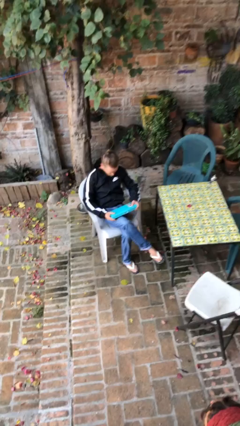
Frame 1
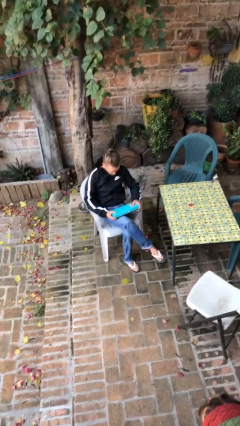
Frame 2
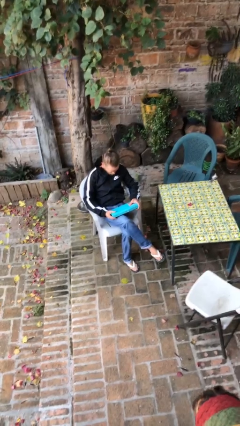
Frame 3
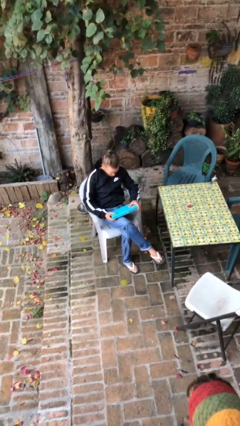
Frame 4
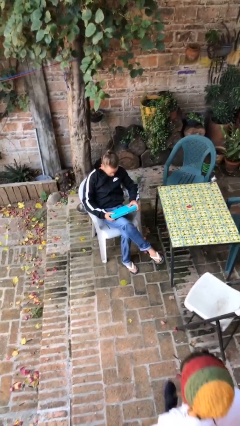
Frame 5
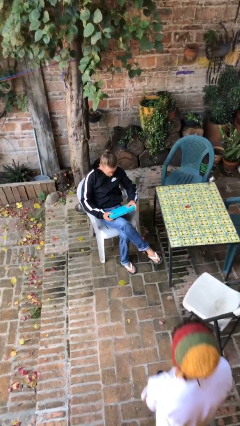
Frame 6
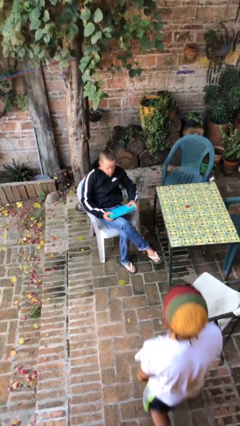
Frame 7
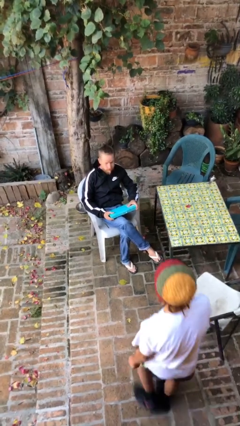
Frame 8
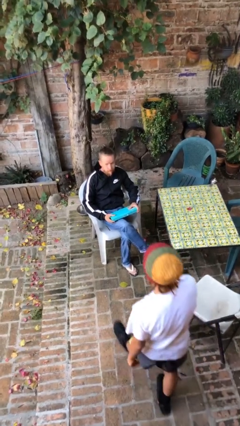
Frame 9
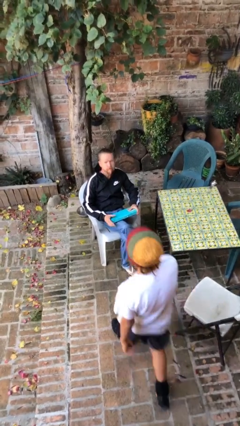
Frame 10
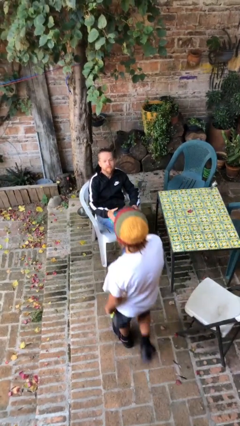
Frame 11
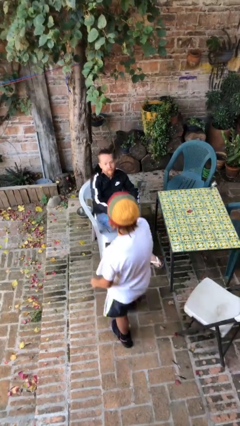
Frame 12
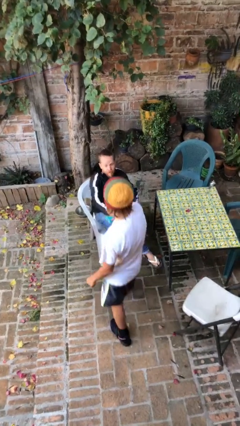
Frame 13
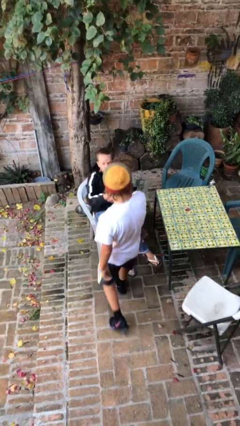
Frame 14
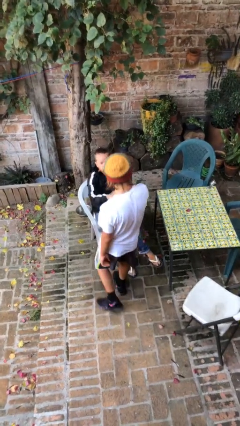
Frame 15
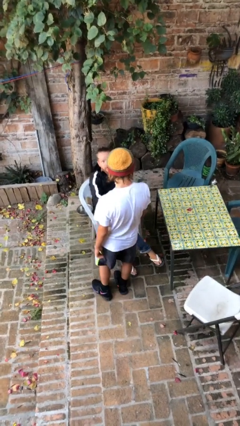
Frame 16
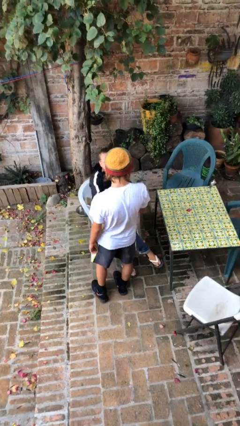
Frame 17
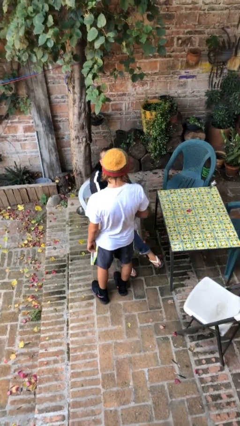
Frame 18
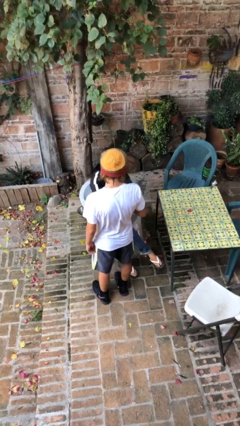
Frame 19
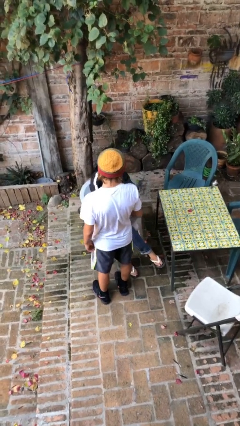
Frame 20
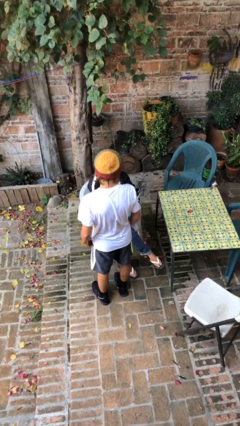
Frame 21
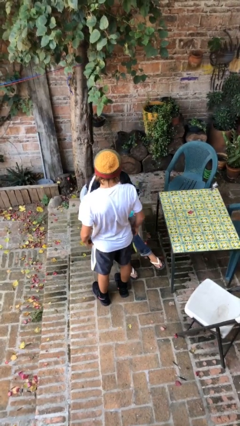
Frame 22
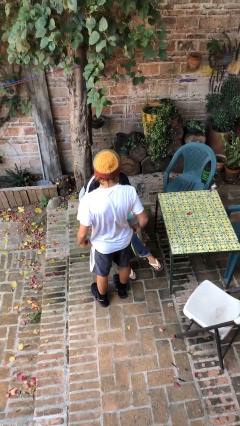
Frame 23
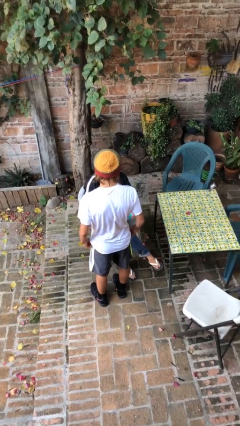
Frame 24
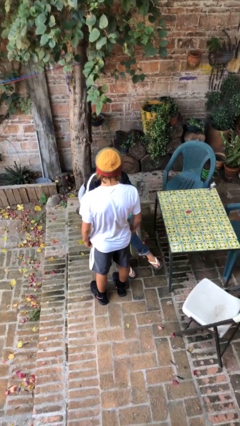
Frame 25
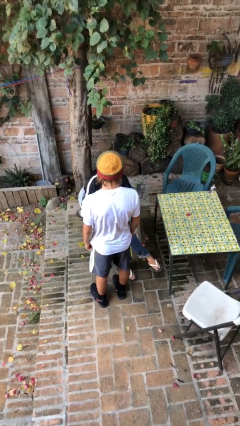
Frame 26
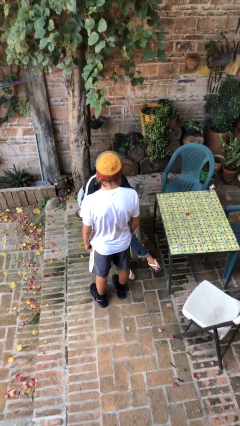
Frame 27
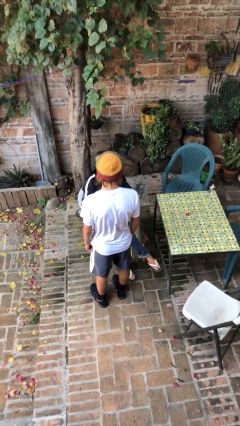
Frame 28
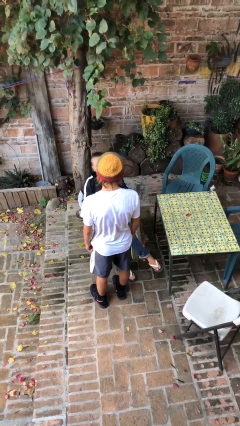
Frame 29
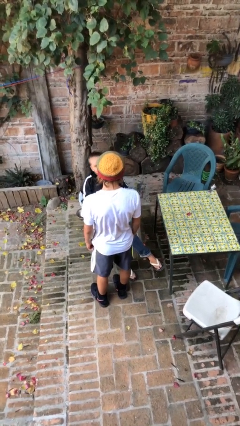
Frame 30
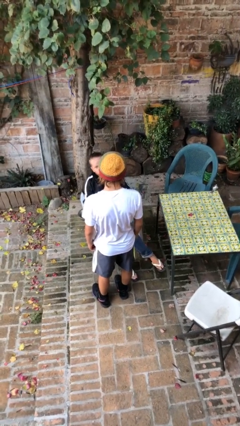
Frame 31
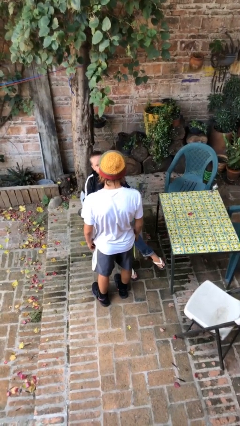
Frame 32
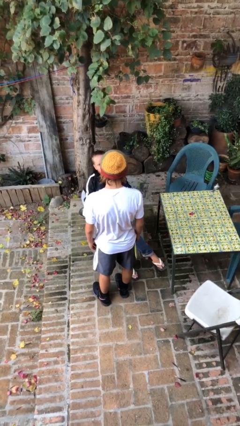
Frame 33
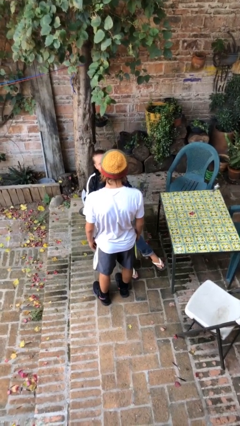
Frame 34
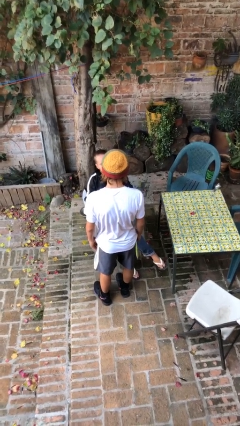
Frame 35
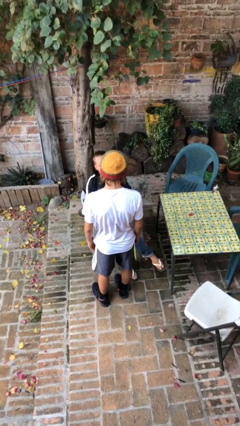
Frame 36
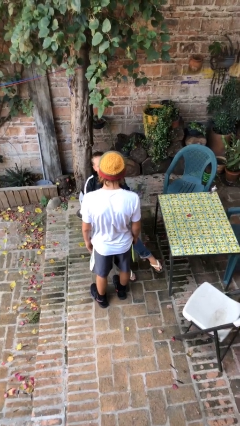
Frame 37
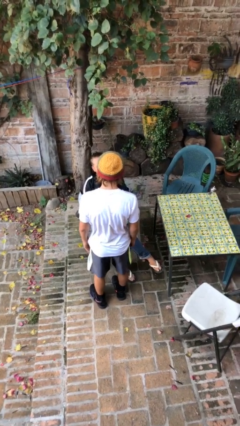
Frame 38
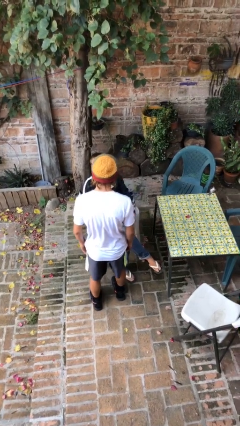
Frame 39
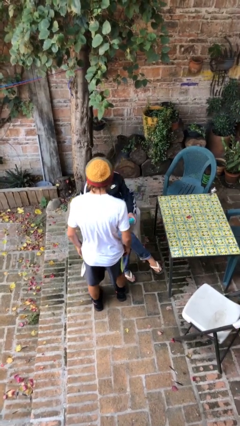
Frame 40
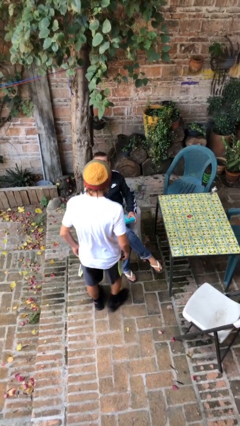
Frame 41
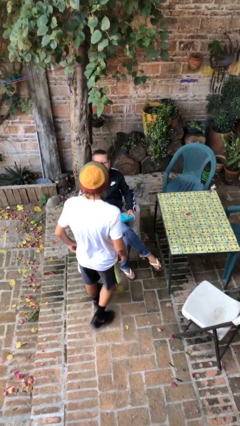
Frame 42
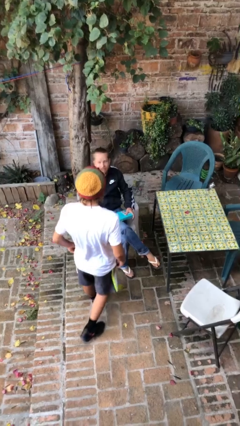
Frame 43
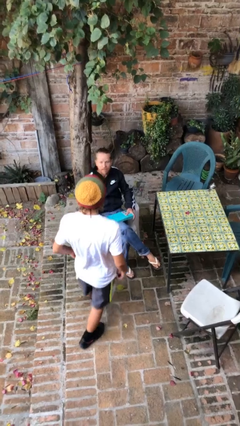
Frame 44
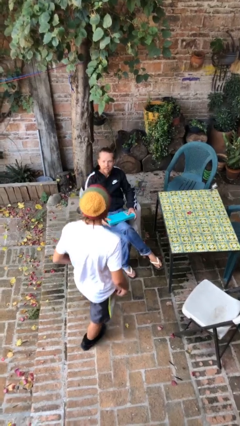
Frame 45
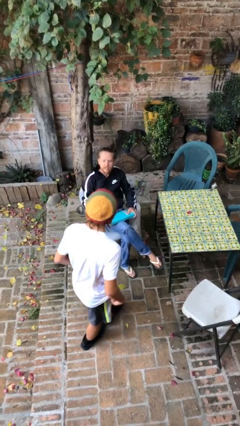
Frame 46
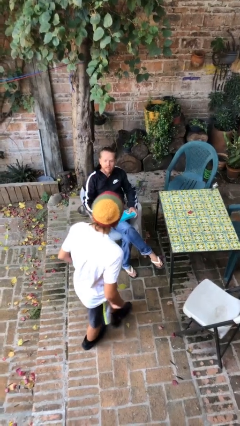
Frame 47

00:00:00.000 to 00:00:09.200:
person shakes hand

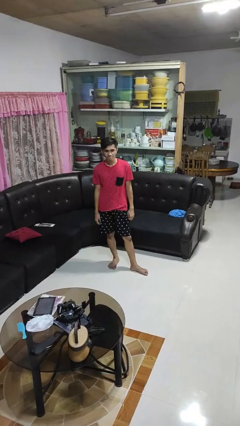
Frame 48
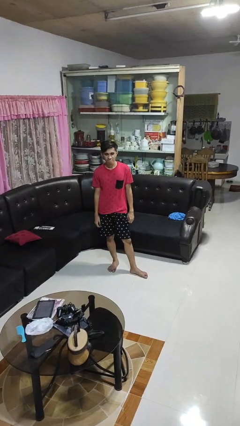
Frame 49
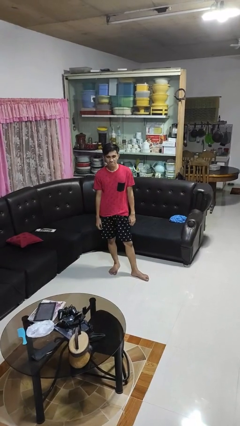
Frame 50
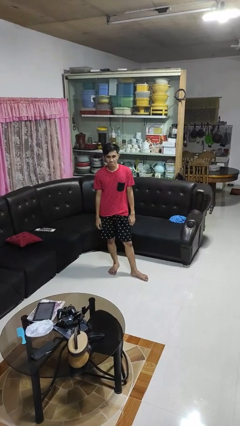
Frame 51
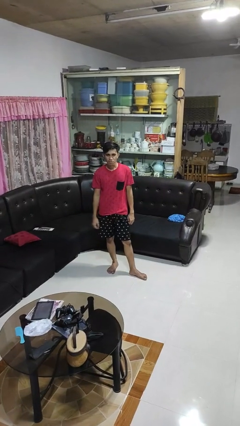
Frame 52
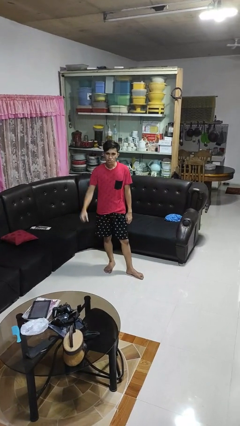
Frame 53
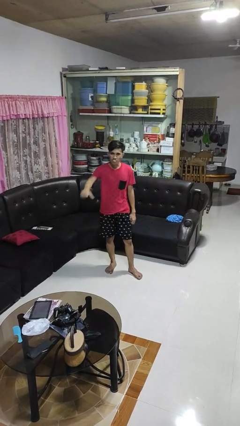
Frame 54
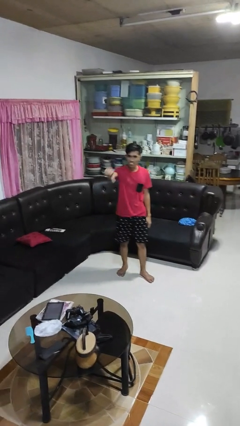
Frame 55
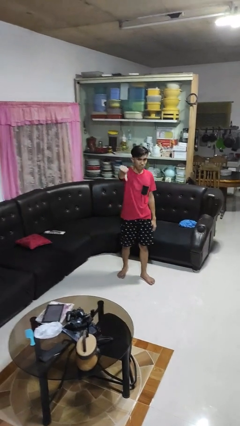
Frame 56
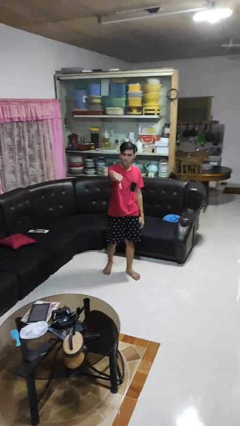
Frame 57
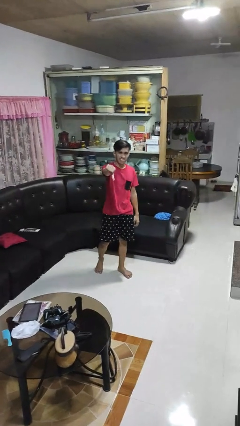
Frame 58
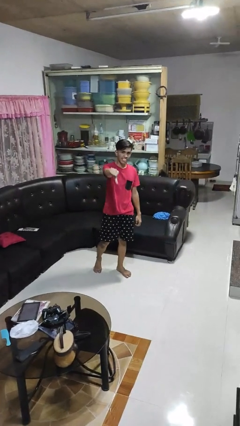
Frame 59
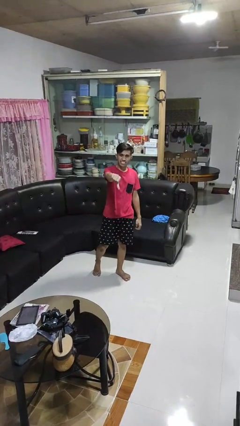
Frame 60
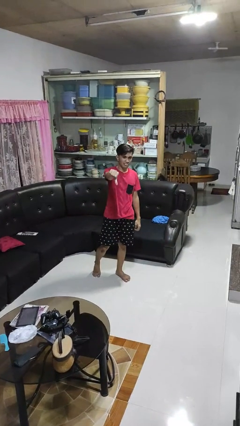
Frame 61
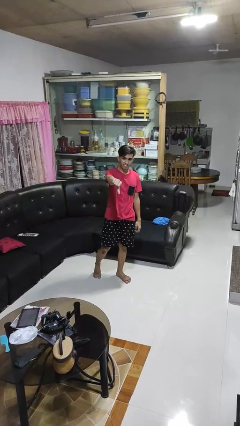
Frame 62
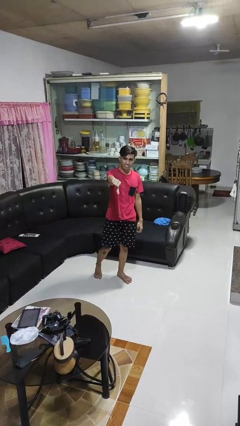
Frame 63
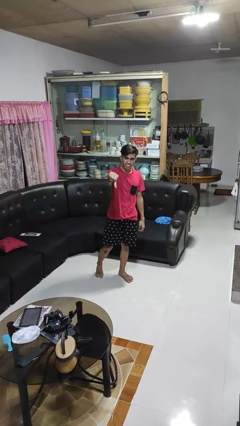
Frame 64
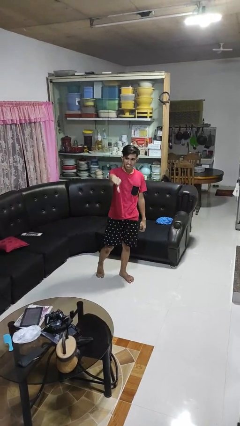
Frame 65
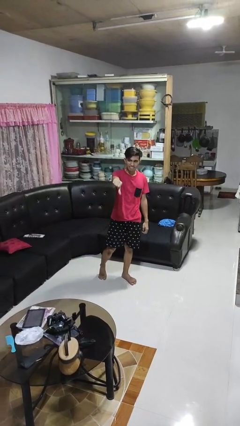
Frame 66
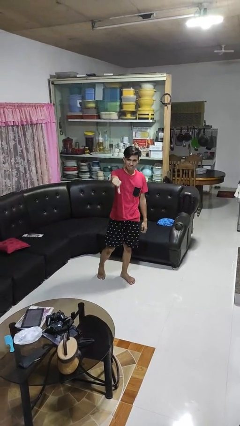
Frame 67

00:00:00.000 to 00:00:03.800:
person gestures thumbs down

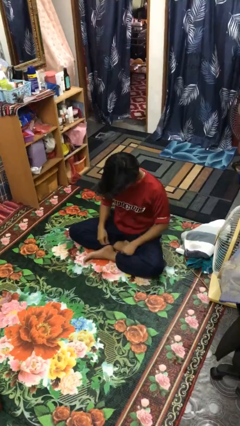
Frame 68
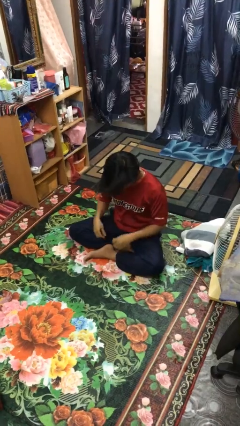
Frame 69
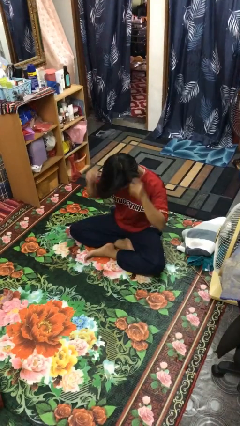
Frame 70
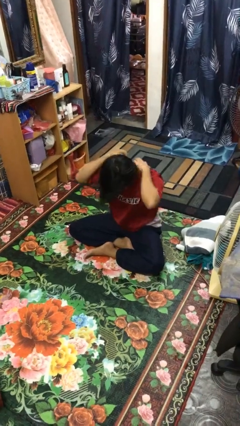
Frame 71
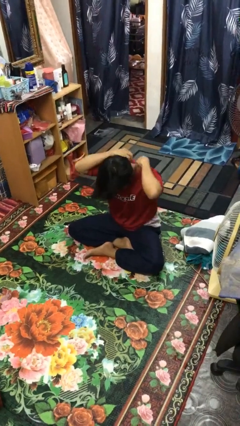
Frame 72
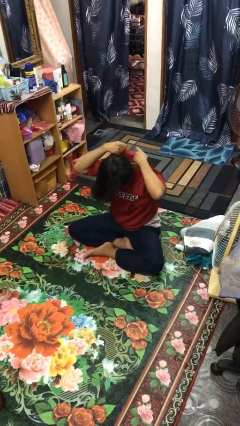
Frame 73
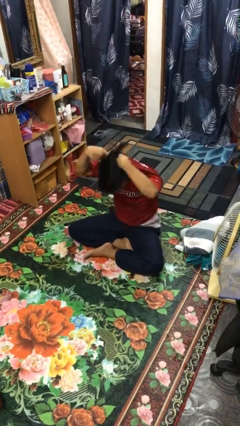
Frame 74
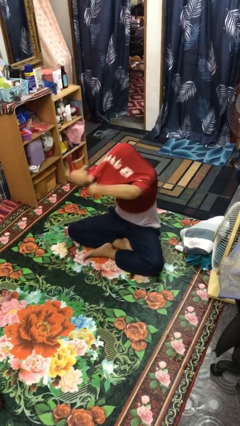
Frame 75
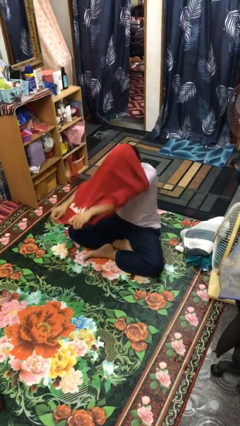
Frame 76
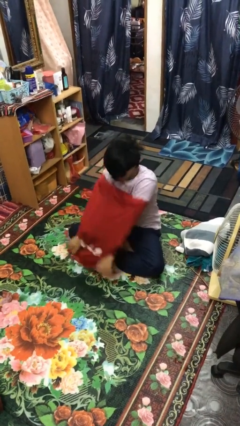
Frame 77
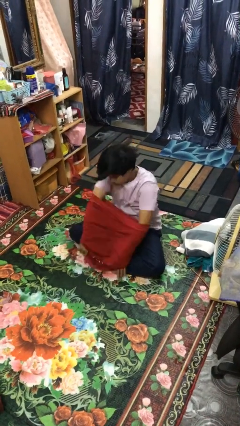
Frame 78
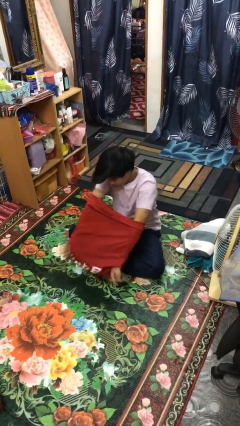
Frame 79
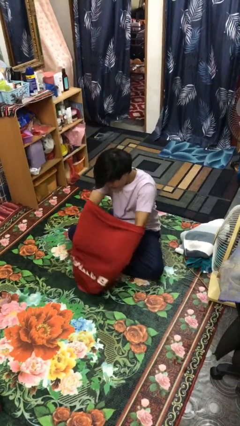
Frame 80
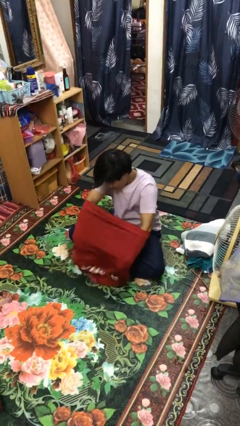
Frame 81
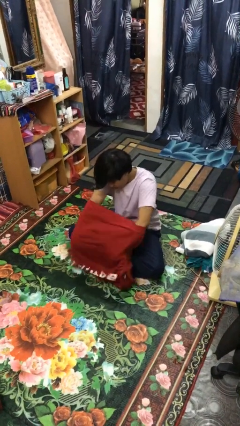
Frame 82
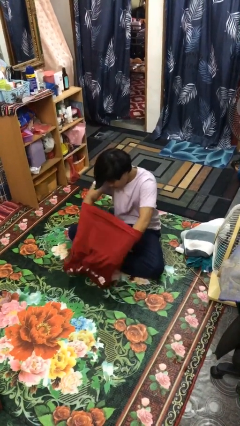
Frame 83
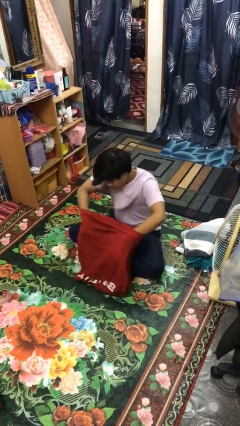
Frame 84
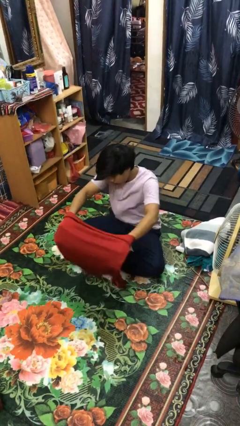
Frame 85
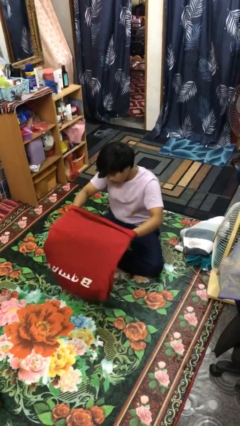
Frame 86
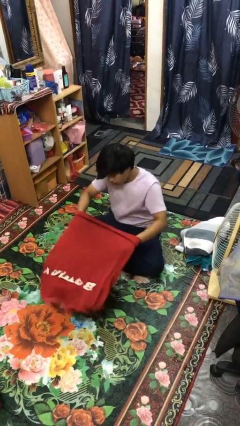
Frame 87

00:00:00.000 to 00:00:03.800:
person takes off shirt

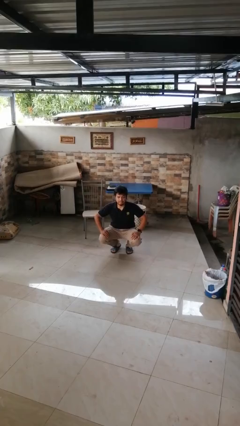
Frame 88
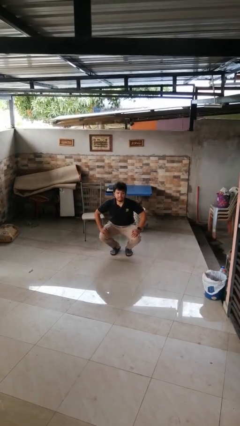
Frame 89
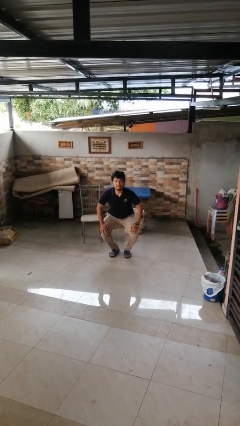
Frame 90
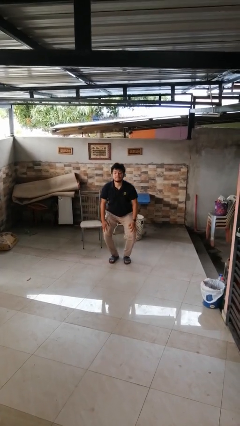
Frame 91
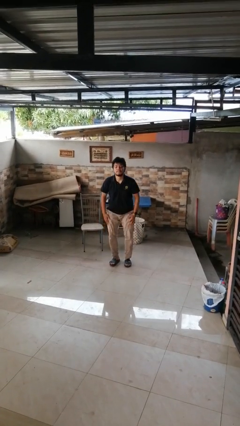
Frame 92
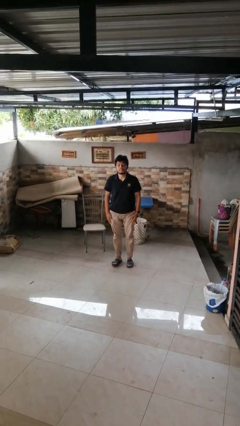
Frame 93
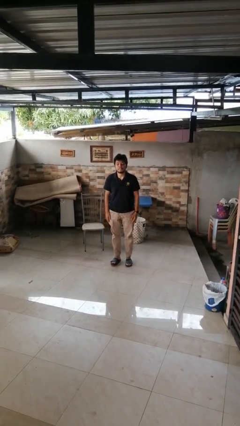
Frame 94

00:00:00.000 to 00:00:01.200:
person stands up
